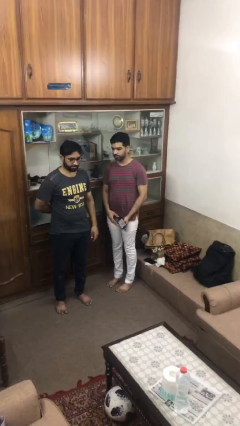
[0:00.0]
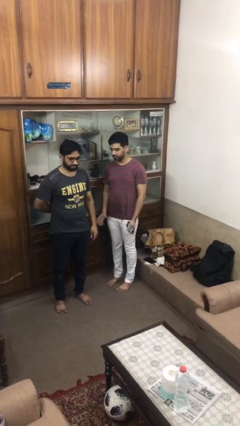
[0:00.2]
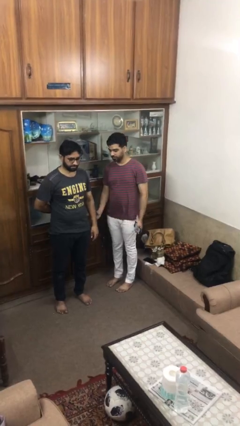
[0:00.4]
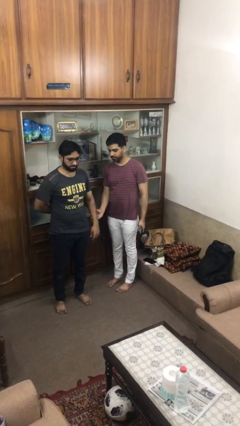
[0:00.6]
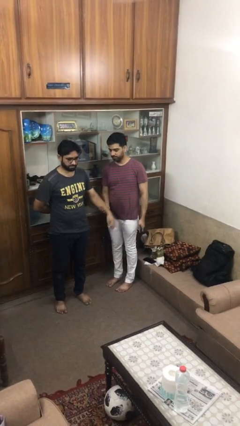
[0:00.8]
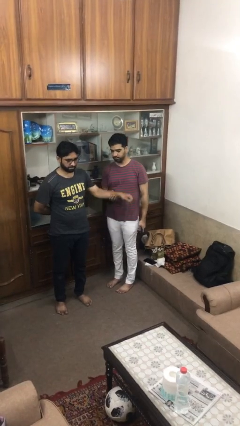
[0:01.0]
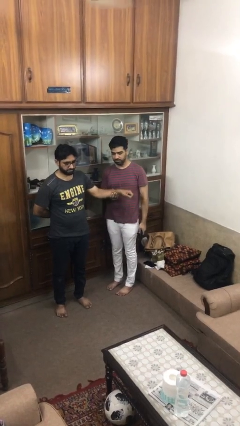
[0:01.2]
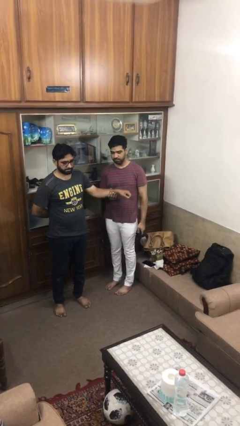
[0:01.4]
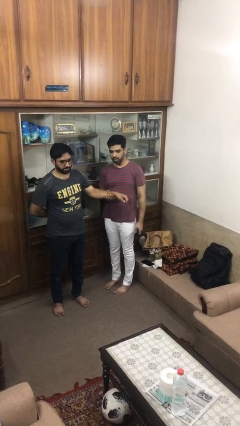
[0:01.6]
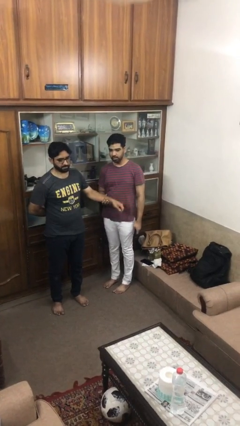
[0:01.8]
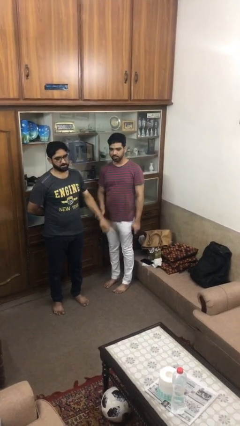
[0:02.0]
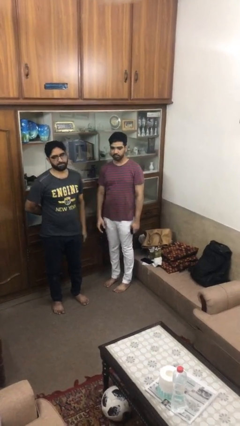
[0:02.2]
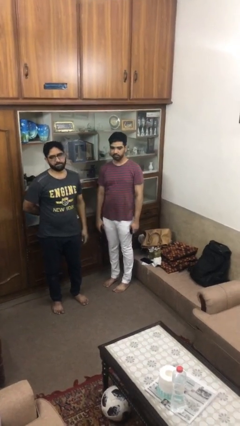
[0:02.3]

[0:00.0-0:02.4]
person grabs person by forearm

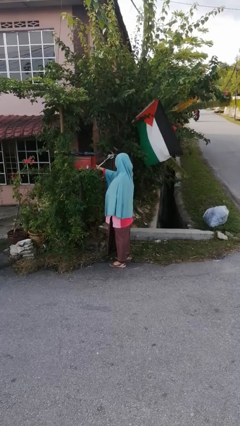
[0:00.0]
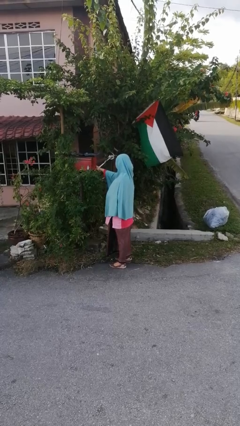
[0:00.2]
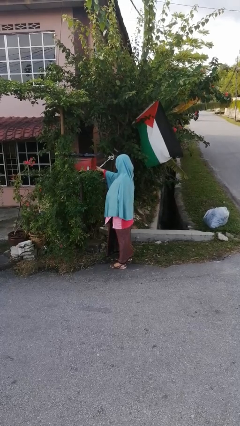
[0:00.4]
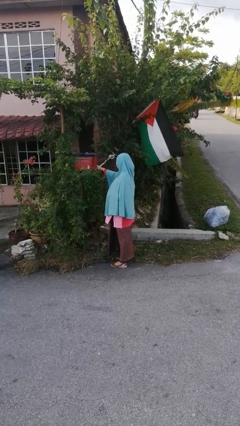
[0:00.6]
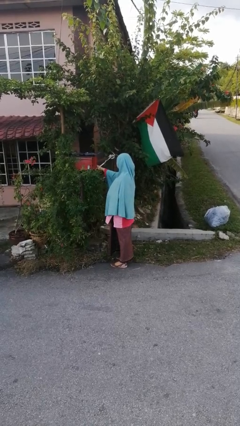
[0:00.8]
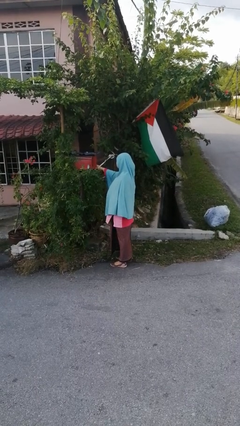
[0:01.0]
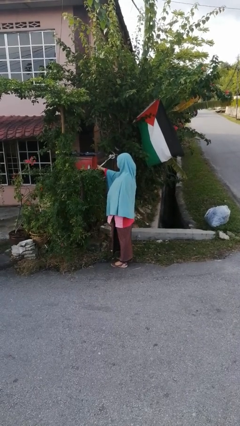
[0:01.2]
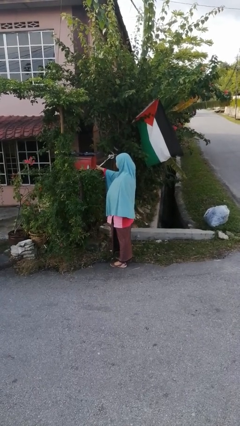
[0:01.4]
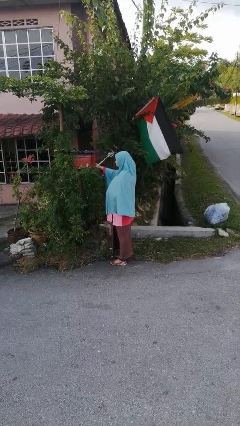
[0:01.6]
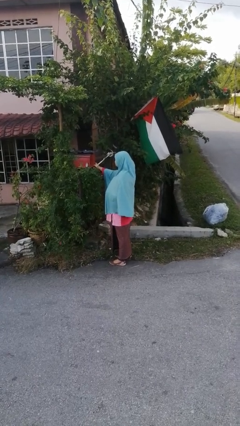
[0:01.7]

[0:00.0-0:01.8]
person opens mailbox

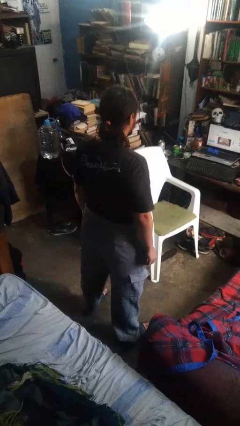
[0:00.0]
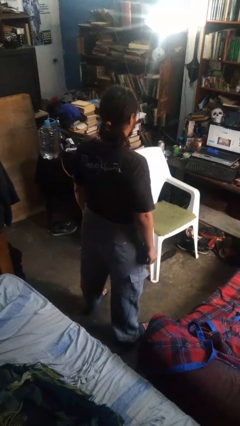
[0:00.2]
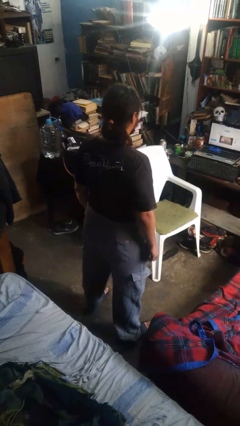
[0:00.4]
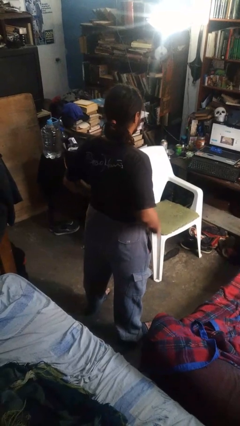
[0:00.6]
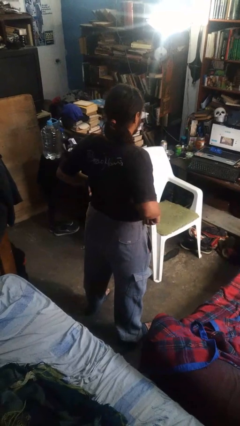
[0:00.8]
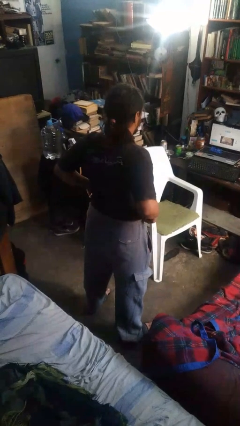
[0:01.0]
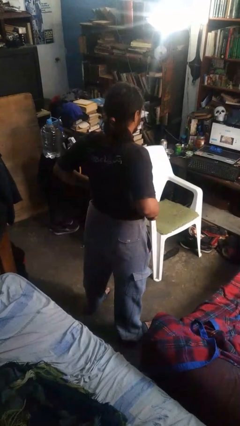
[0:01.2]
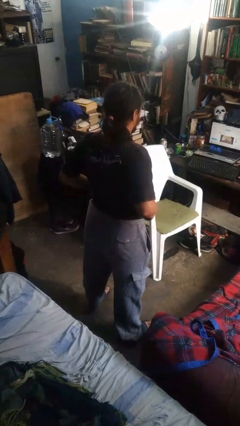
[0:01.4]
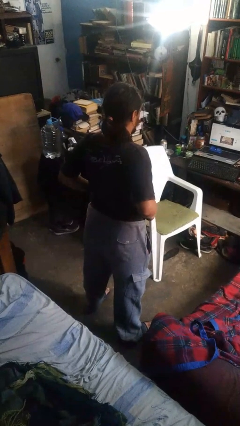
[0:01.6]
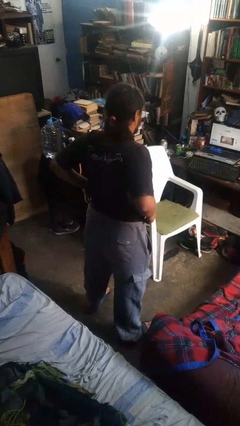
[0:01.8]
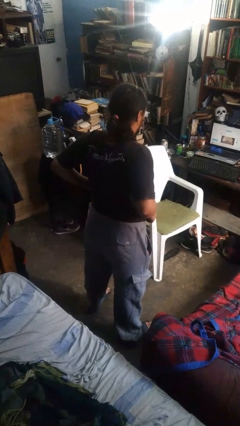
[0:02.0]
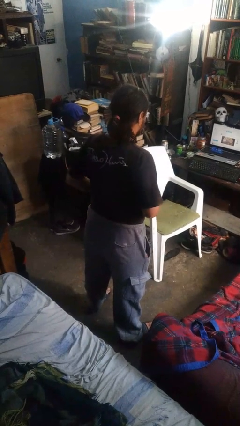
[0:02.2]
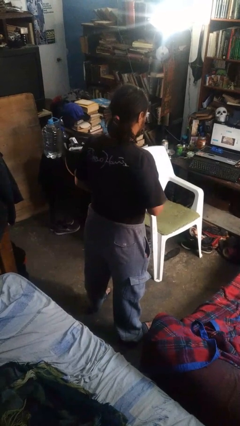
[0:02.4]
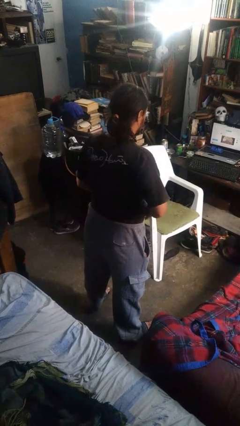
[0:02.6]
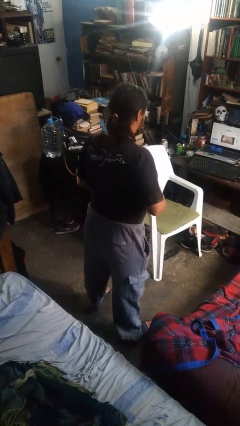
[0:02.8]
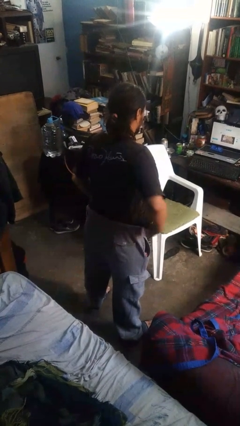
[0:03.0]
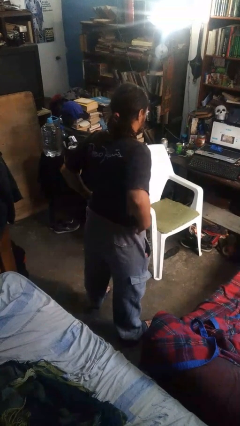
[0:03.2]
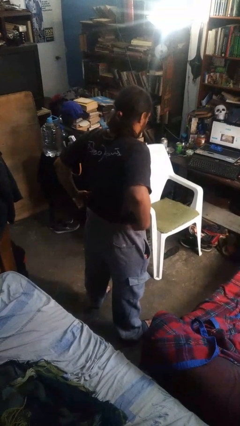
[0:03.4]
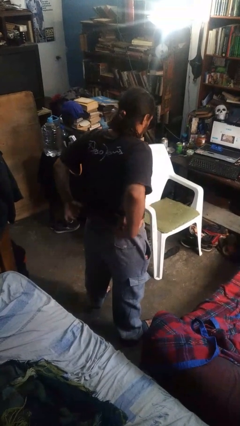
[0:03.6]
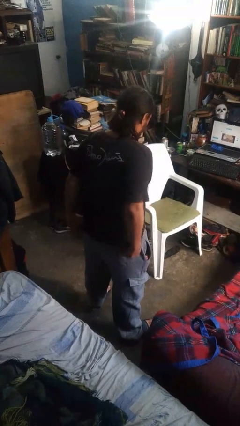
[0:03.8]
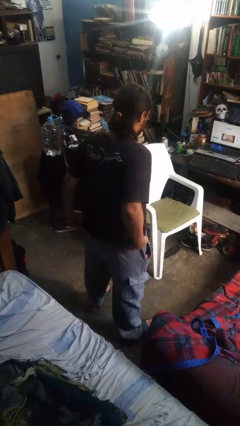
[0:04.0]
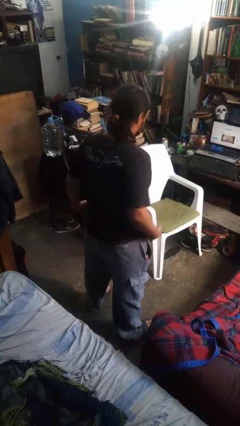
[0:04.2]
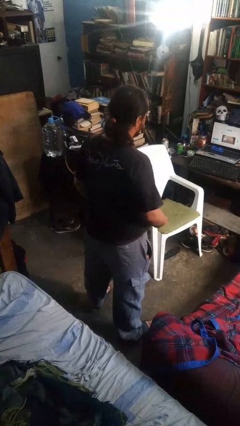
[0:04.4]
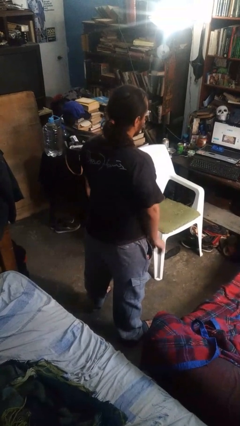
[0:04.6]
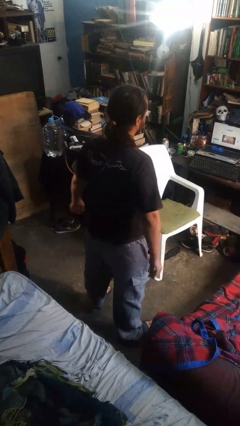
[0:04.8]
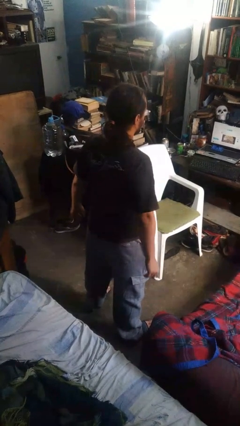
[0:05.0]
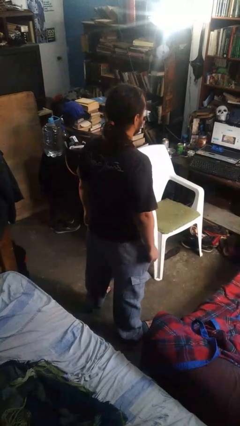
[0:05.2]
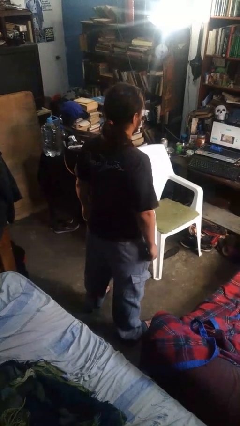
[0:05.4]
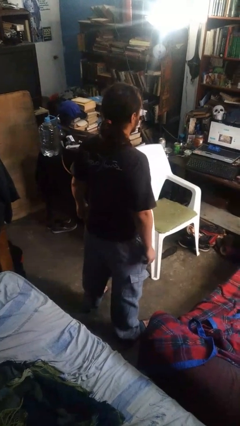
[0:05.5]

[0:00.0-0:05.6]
person untucks shirt

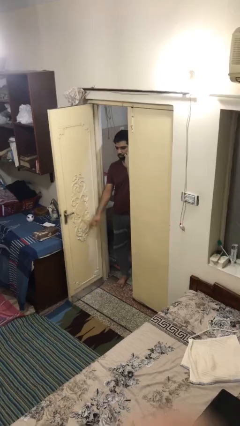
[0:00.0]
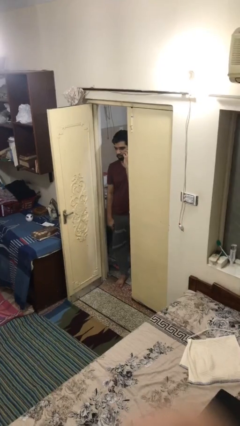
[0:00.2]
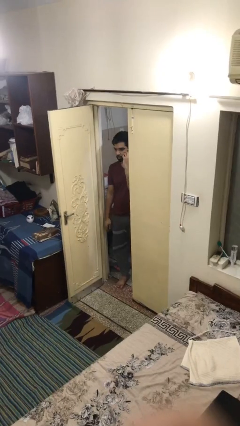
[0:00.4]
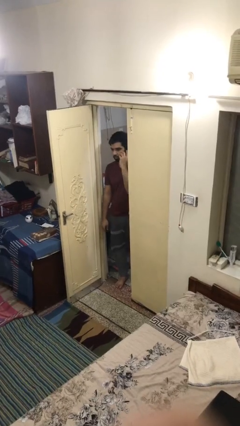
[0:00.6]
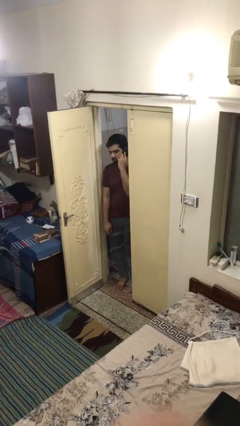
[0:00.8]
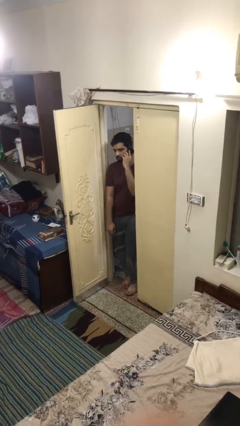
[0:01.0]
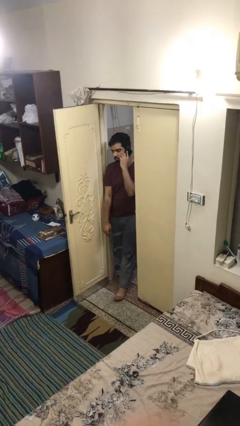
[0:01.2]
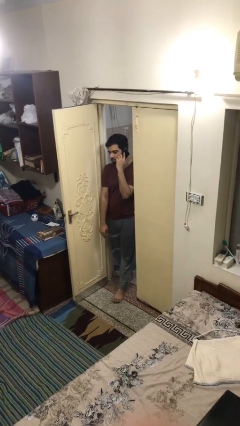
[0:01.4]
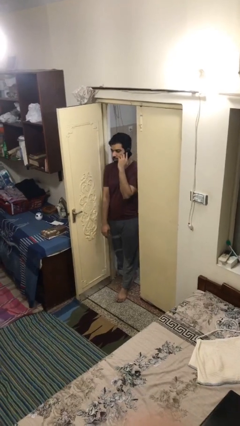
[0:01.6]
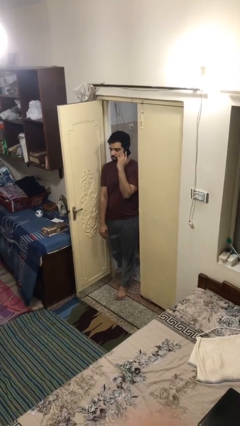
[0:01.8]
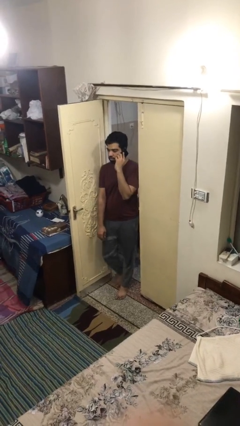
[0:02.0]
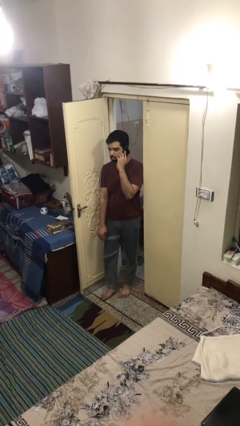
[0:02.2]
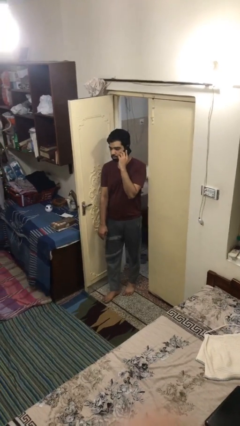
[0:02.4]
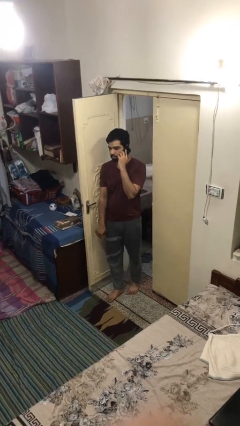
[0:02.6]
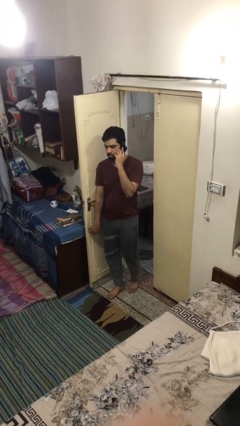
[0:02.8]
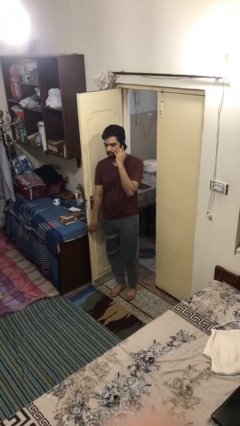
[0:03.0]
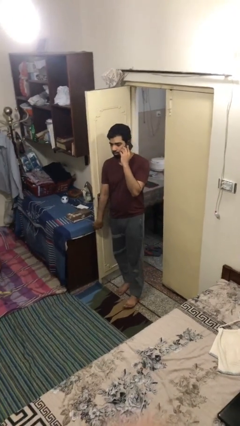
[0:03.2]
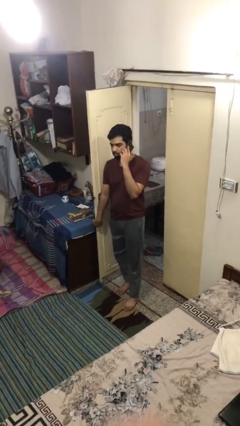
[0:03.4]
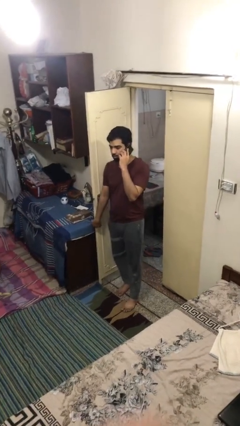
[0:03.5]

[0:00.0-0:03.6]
person enters scene through structure

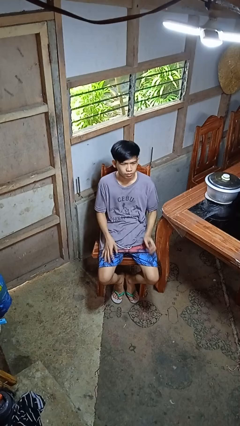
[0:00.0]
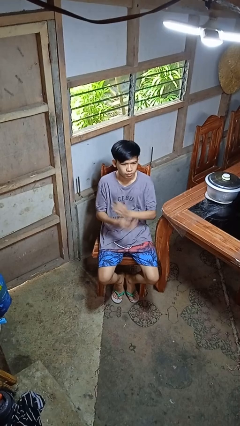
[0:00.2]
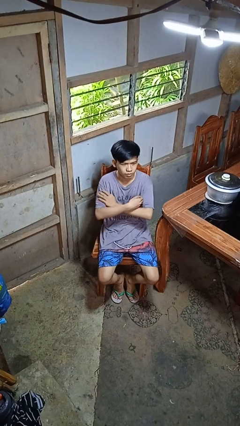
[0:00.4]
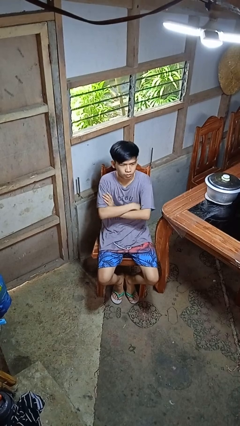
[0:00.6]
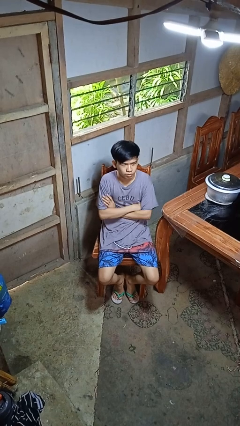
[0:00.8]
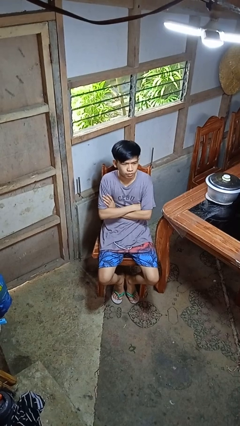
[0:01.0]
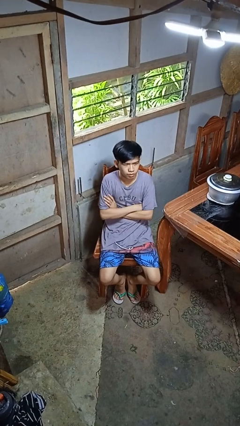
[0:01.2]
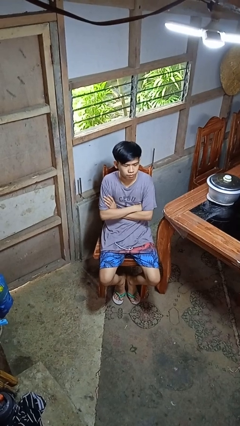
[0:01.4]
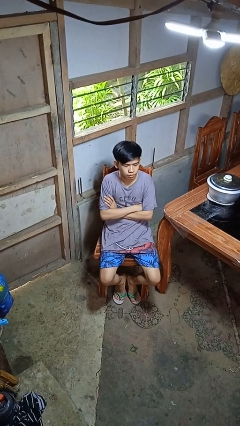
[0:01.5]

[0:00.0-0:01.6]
person crosses arms

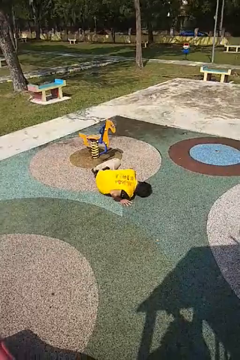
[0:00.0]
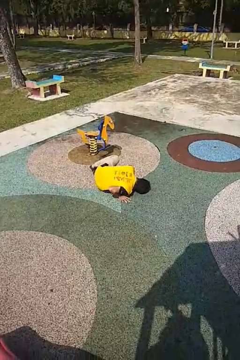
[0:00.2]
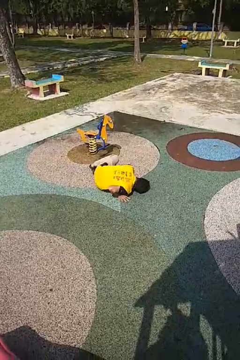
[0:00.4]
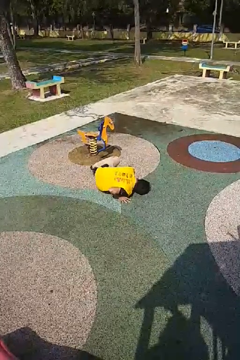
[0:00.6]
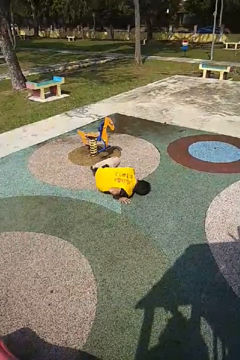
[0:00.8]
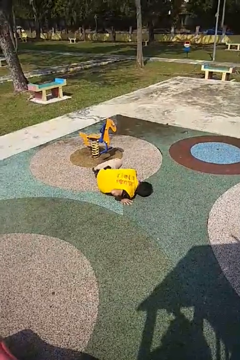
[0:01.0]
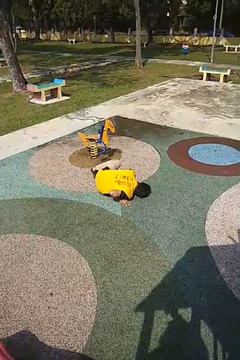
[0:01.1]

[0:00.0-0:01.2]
person lies down on floor

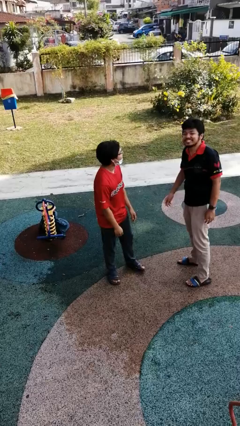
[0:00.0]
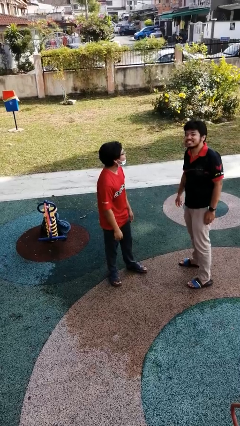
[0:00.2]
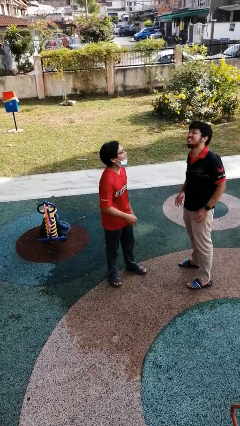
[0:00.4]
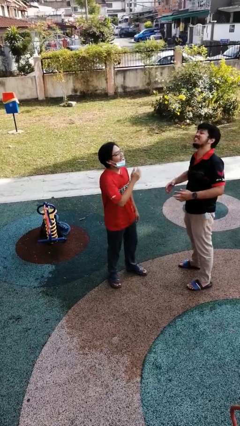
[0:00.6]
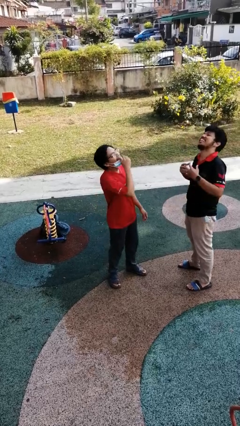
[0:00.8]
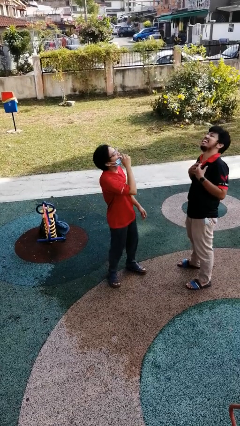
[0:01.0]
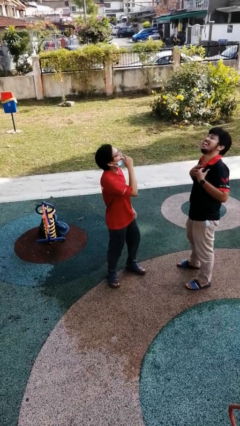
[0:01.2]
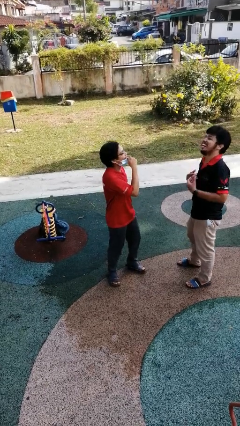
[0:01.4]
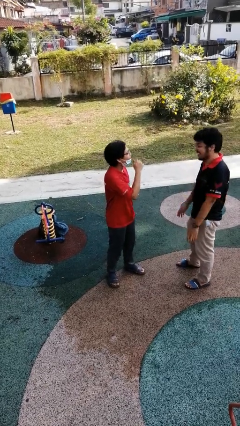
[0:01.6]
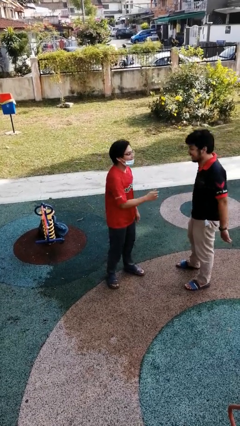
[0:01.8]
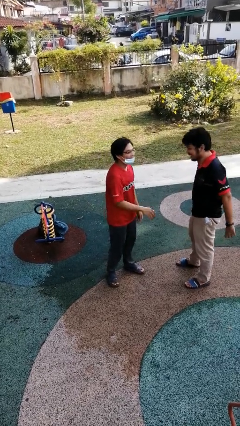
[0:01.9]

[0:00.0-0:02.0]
person laughs with person
